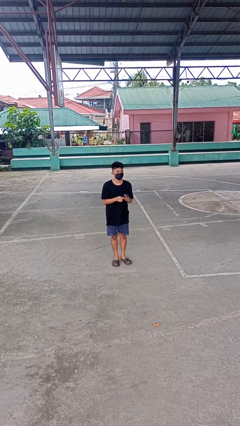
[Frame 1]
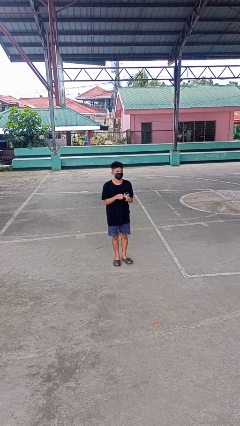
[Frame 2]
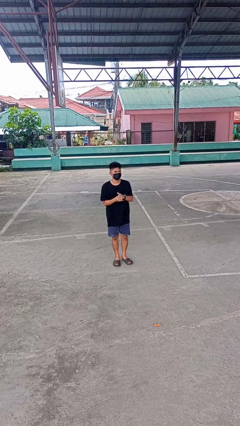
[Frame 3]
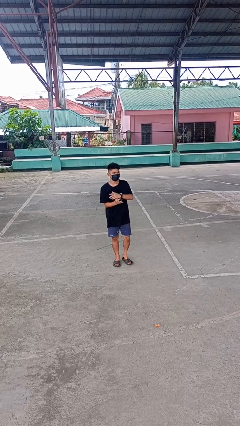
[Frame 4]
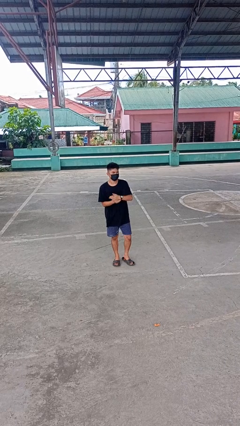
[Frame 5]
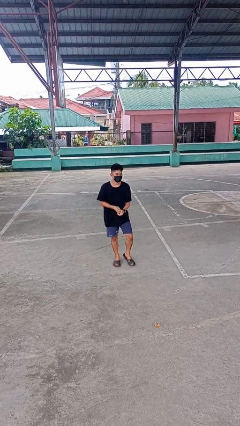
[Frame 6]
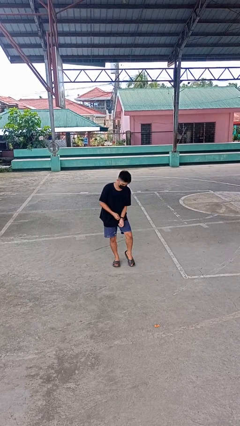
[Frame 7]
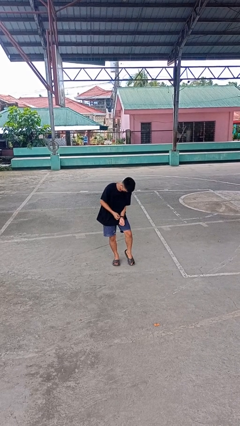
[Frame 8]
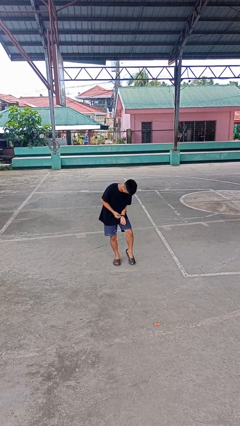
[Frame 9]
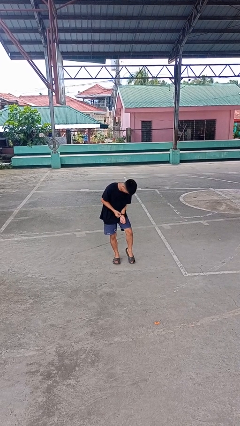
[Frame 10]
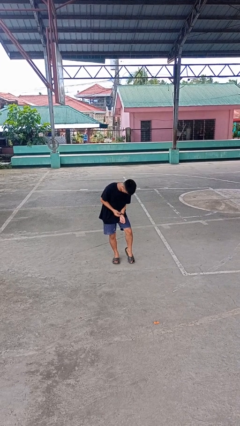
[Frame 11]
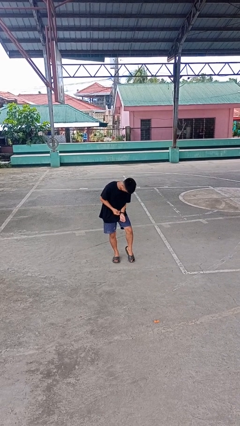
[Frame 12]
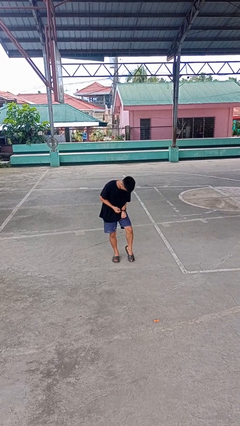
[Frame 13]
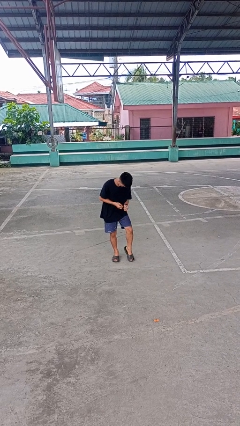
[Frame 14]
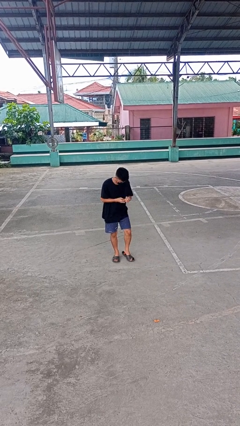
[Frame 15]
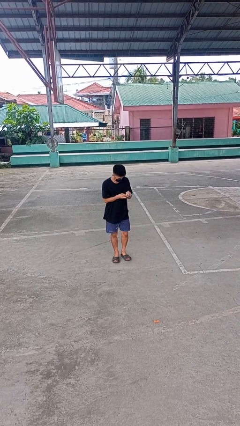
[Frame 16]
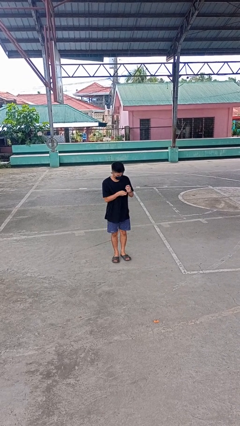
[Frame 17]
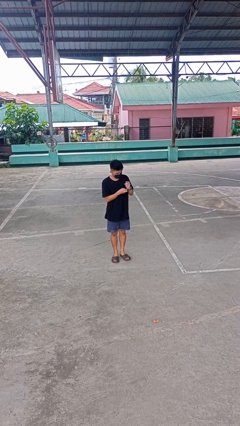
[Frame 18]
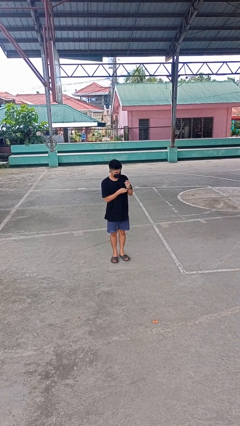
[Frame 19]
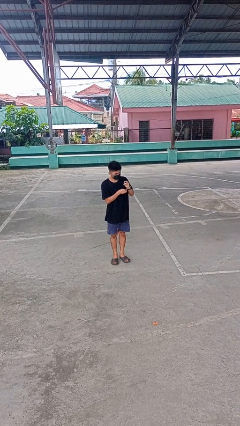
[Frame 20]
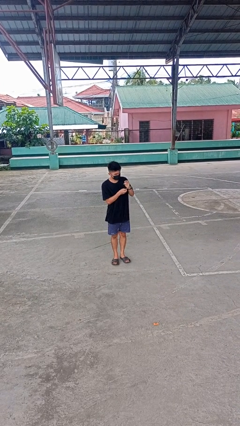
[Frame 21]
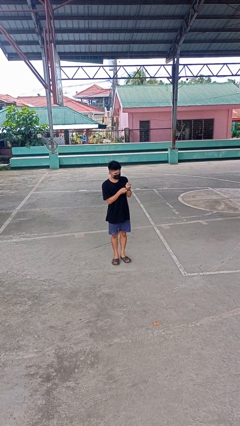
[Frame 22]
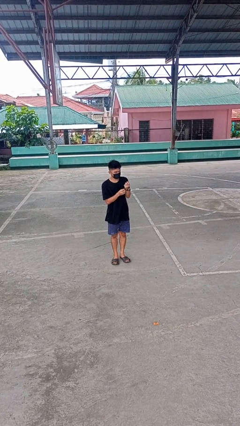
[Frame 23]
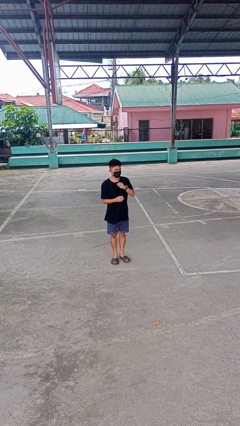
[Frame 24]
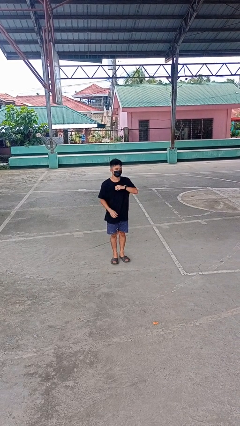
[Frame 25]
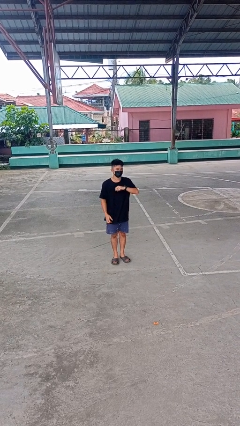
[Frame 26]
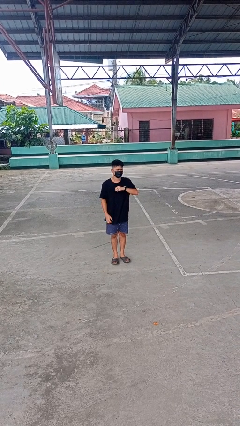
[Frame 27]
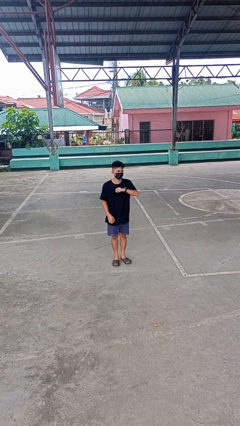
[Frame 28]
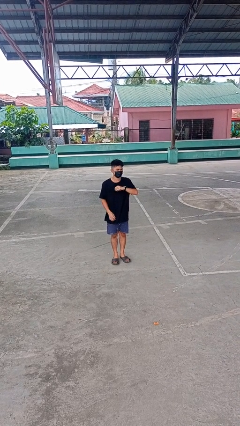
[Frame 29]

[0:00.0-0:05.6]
person puts on wristwatch

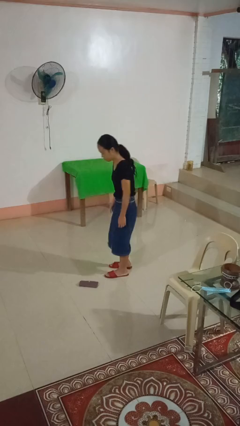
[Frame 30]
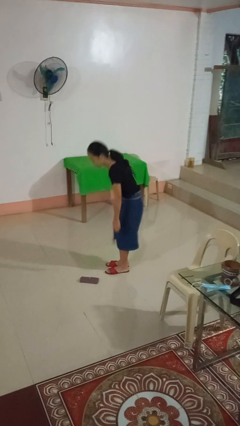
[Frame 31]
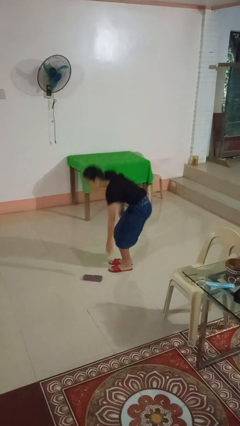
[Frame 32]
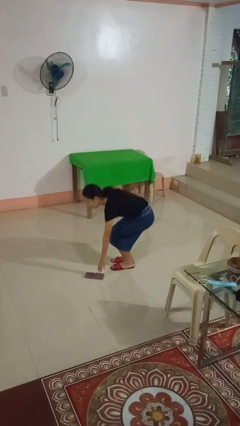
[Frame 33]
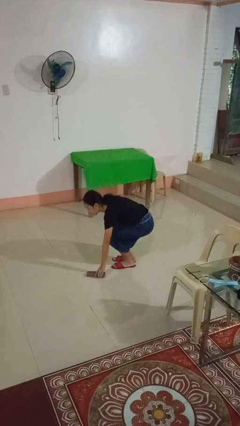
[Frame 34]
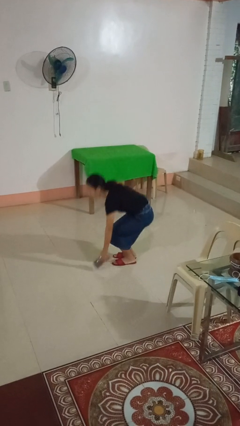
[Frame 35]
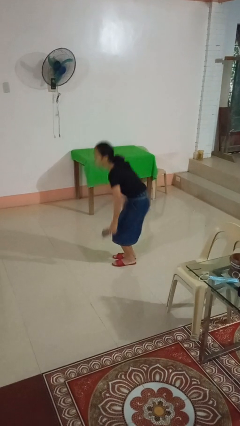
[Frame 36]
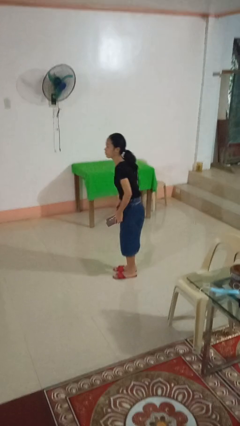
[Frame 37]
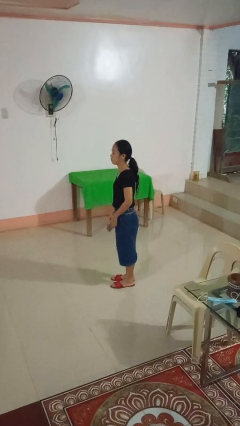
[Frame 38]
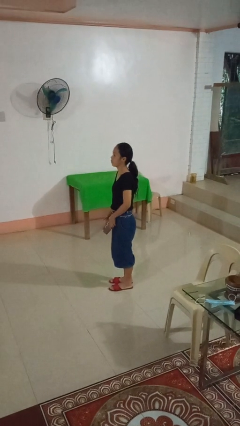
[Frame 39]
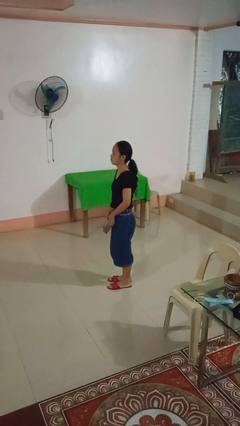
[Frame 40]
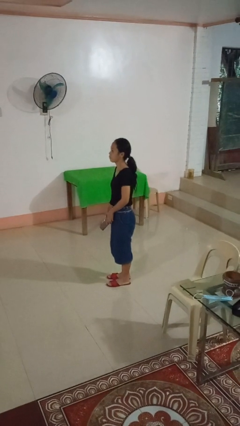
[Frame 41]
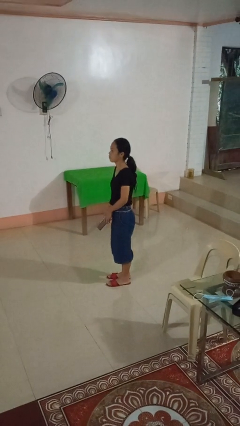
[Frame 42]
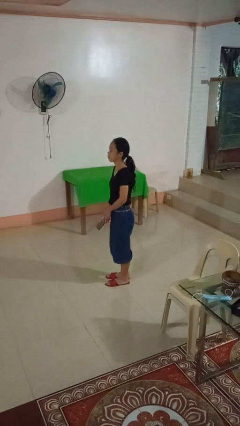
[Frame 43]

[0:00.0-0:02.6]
person picks up object from floor

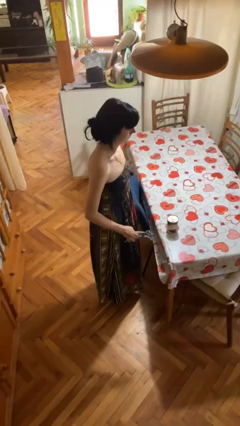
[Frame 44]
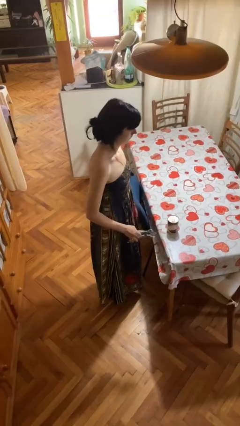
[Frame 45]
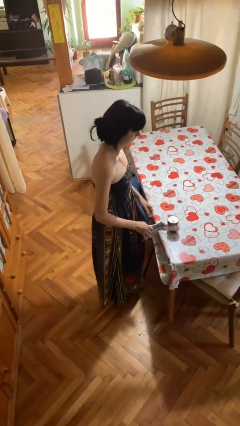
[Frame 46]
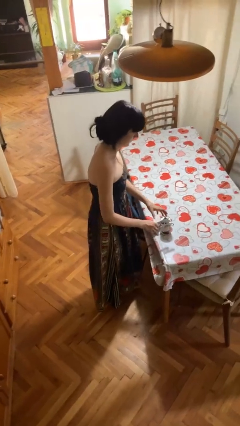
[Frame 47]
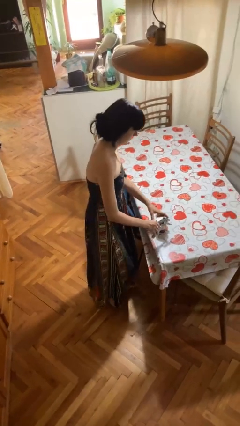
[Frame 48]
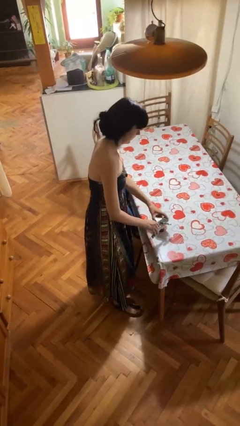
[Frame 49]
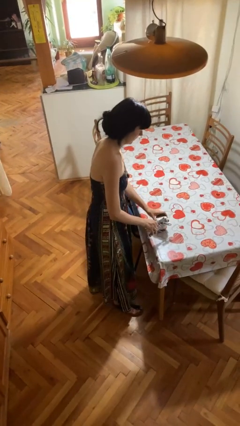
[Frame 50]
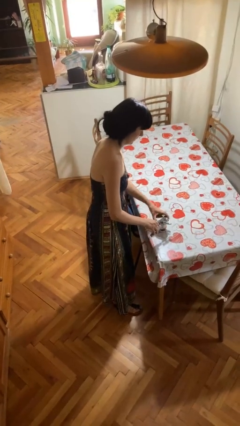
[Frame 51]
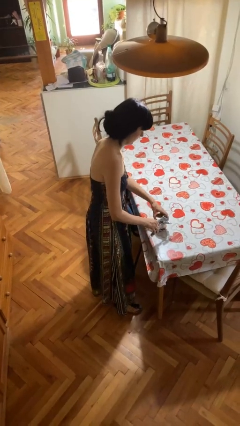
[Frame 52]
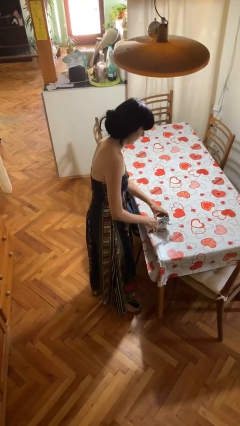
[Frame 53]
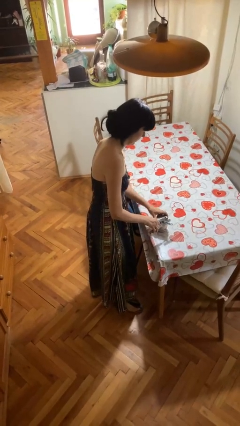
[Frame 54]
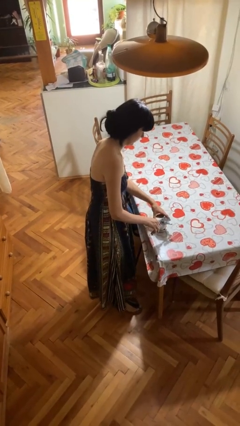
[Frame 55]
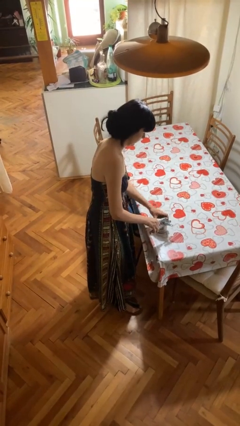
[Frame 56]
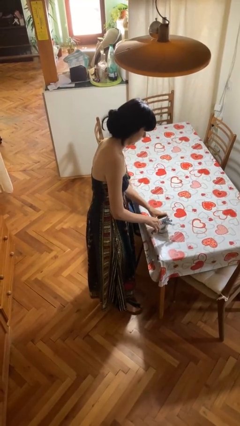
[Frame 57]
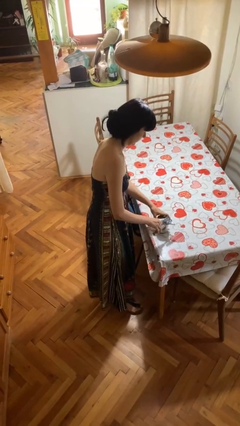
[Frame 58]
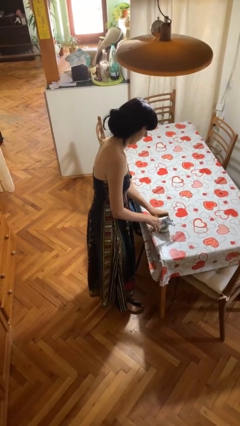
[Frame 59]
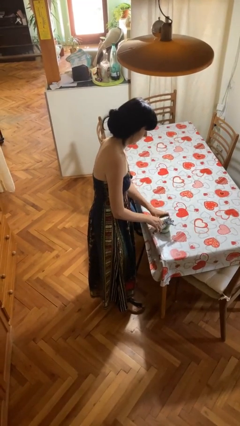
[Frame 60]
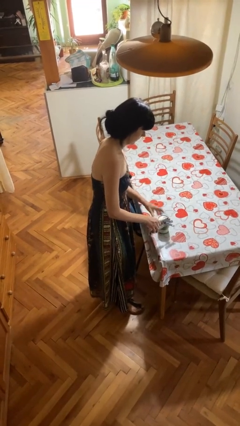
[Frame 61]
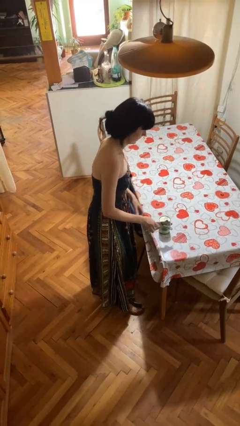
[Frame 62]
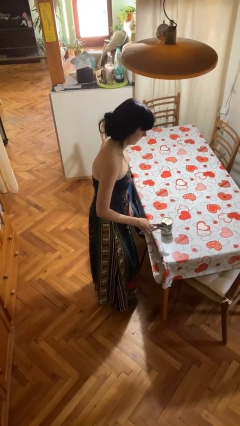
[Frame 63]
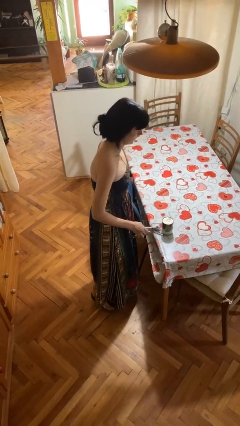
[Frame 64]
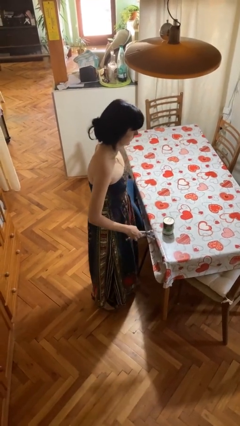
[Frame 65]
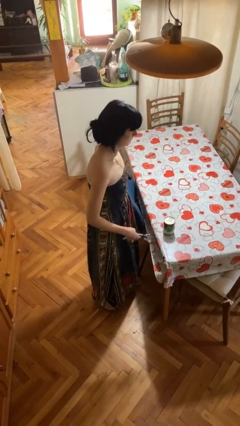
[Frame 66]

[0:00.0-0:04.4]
person opens can with can opener

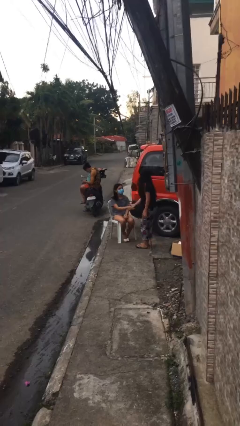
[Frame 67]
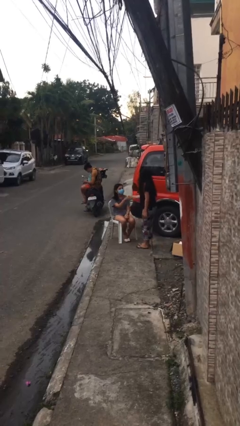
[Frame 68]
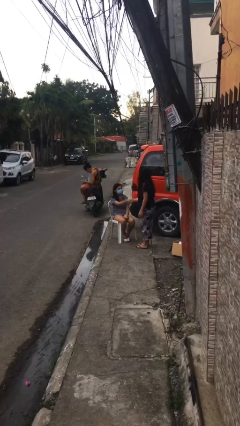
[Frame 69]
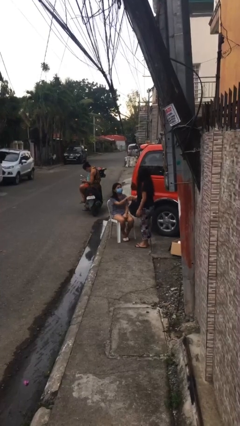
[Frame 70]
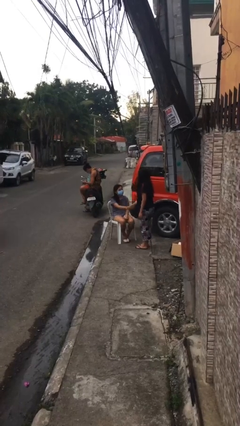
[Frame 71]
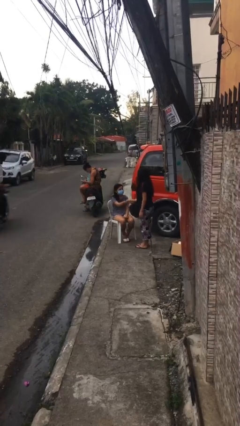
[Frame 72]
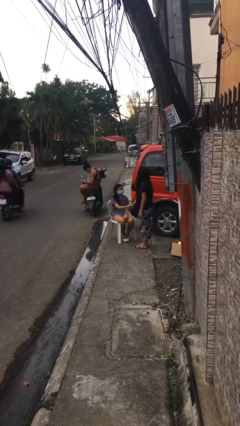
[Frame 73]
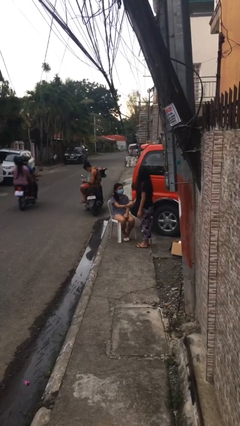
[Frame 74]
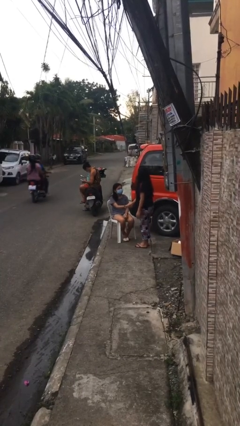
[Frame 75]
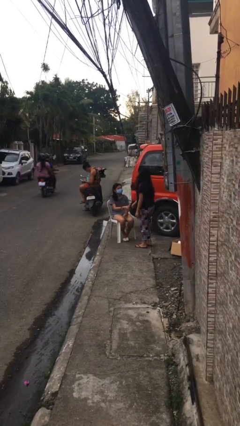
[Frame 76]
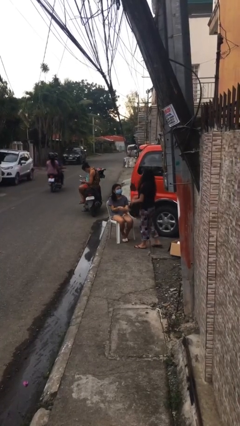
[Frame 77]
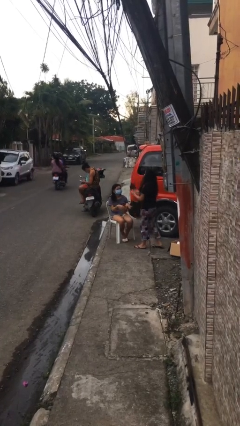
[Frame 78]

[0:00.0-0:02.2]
person shakes hand

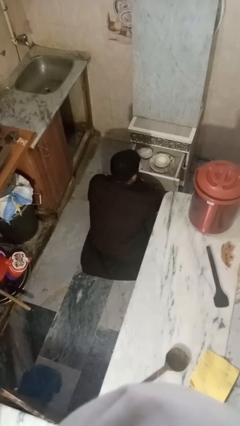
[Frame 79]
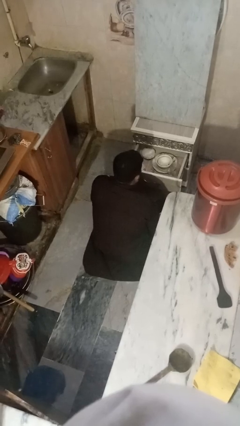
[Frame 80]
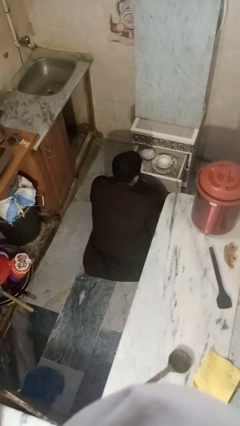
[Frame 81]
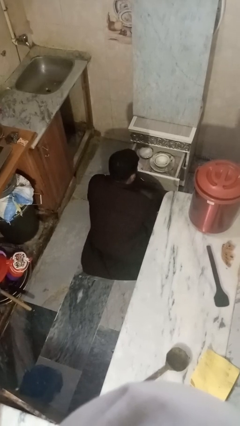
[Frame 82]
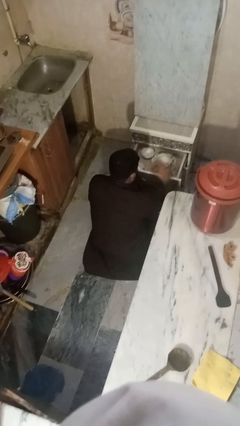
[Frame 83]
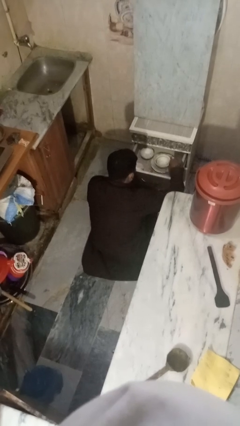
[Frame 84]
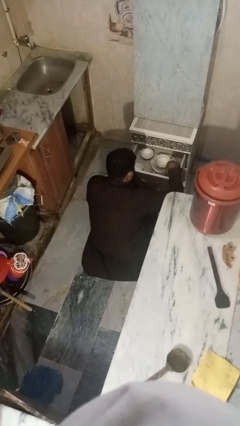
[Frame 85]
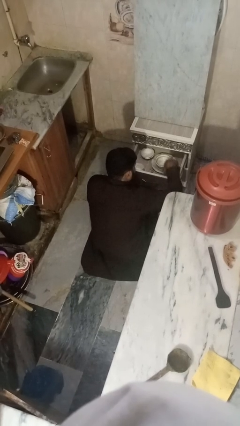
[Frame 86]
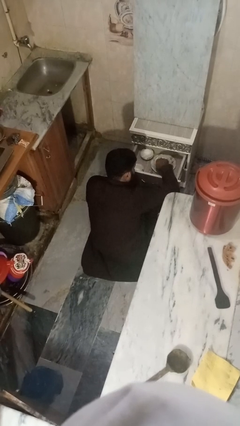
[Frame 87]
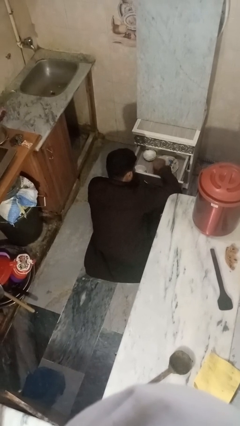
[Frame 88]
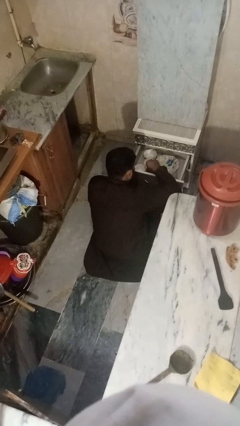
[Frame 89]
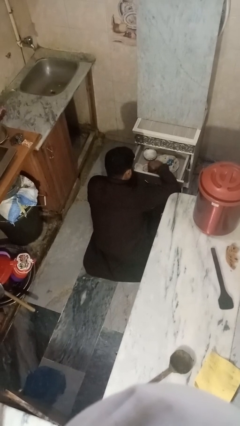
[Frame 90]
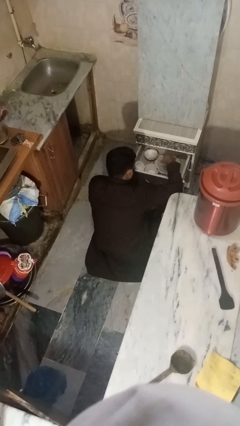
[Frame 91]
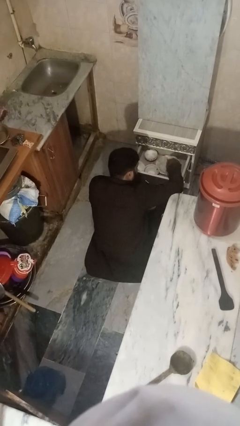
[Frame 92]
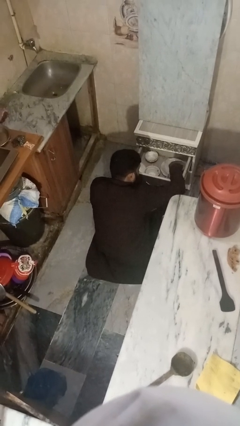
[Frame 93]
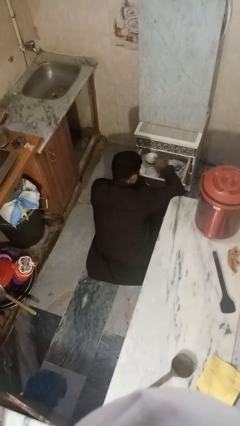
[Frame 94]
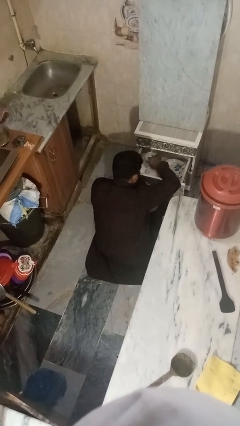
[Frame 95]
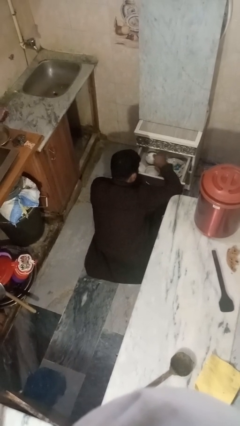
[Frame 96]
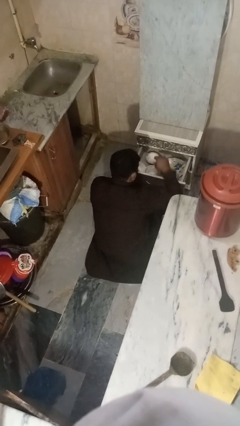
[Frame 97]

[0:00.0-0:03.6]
person searches in kitchen drawer
